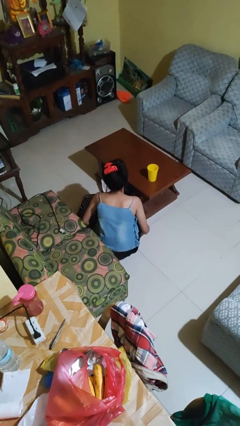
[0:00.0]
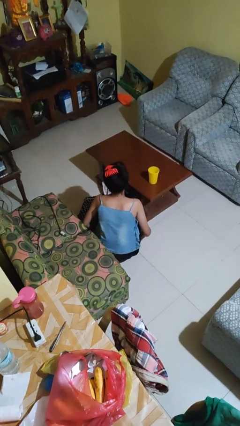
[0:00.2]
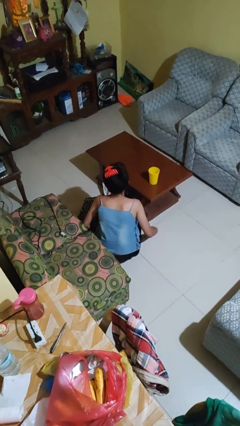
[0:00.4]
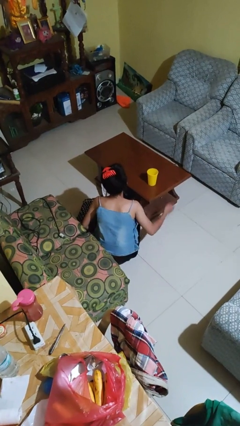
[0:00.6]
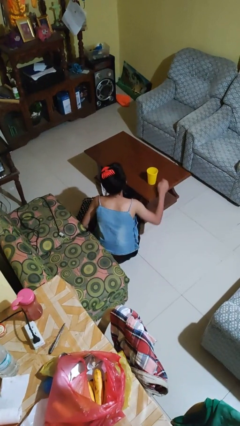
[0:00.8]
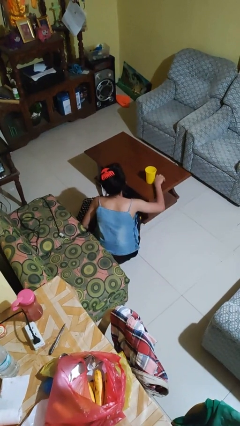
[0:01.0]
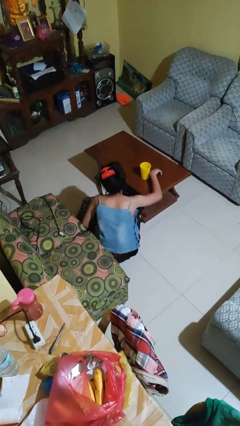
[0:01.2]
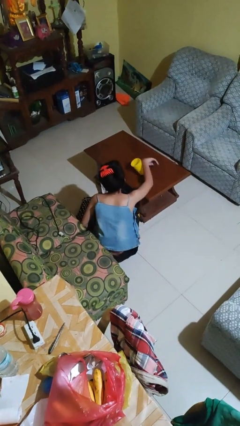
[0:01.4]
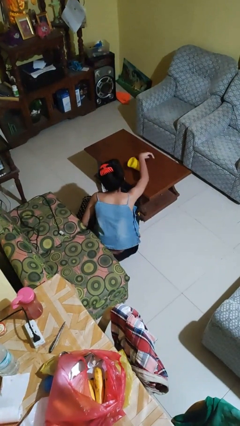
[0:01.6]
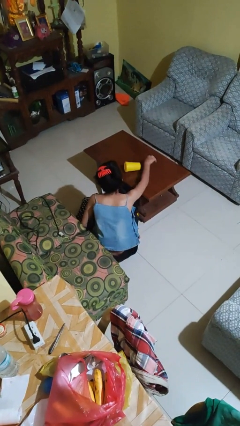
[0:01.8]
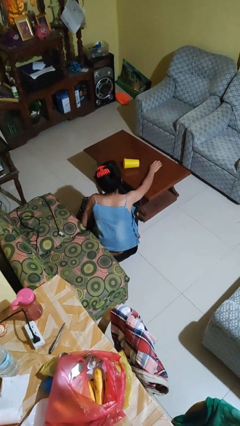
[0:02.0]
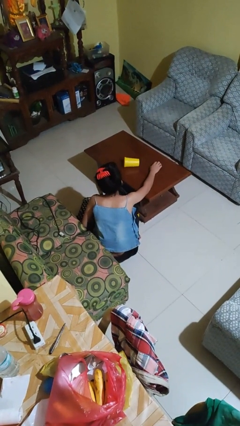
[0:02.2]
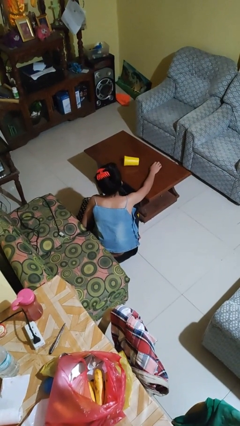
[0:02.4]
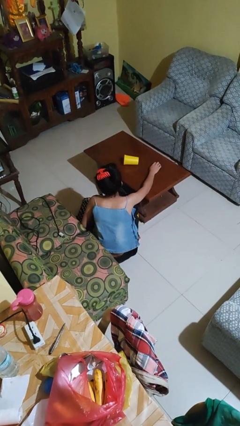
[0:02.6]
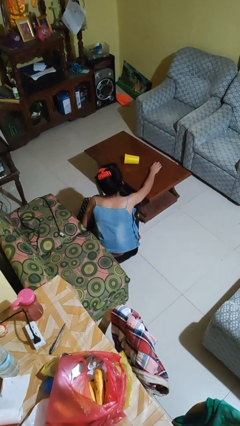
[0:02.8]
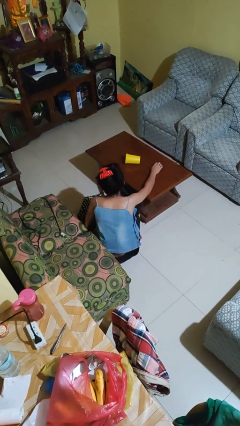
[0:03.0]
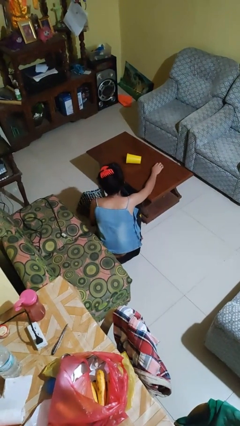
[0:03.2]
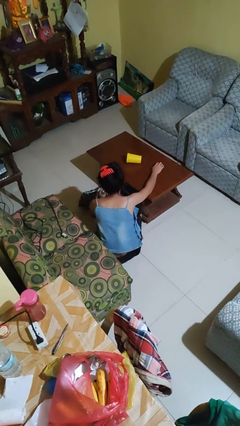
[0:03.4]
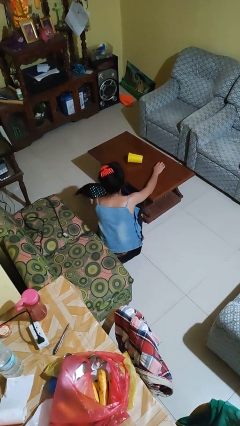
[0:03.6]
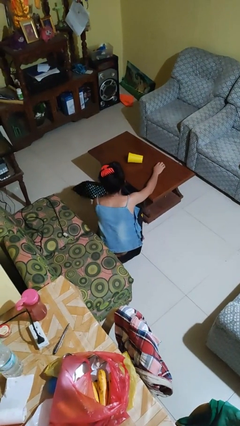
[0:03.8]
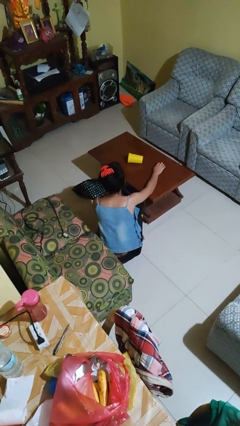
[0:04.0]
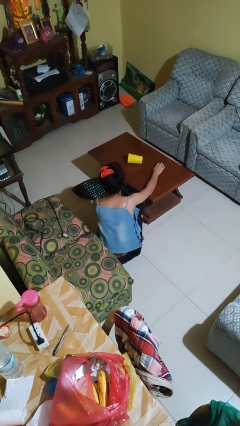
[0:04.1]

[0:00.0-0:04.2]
person spills on table

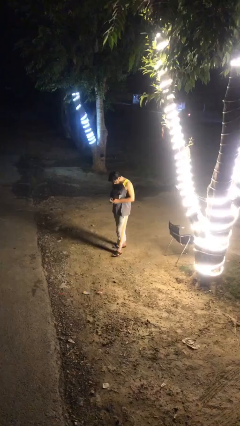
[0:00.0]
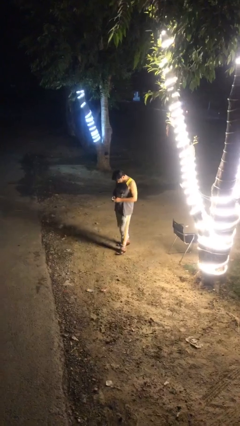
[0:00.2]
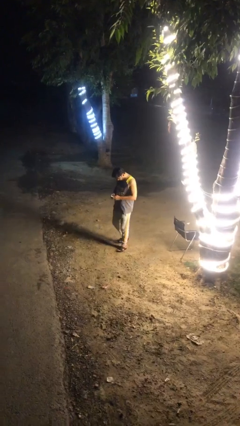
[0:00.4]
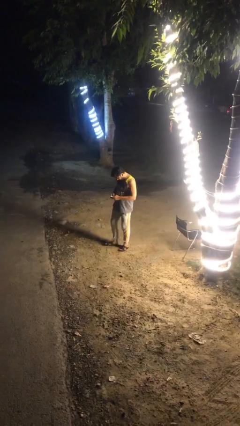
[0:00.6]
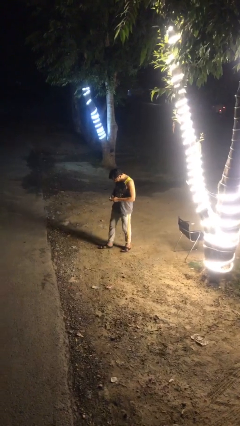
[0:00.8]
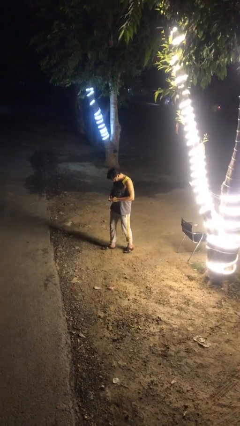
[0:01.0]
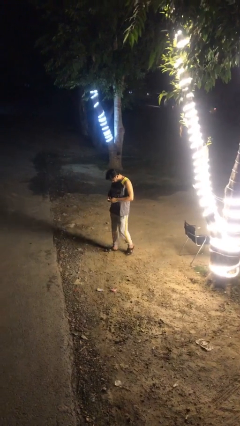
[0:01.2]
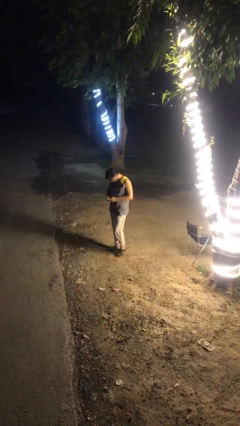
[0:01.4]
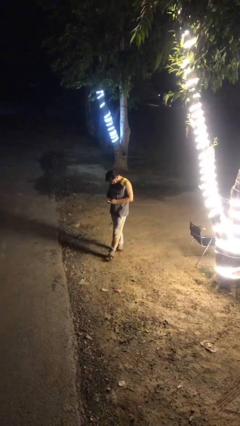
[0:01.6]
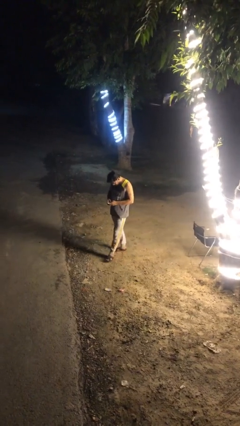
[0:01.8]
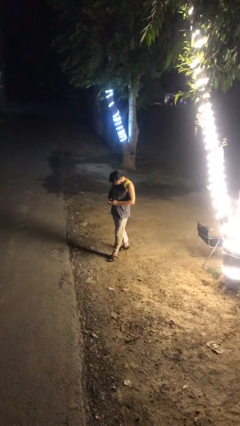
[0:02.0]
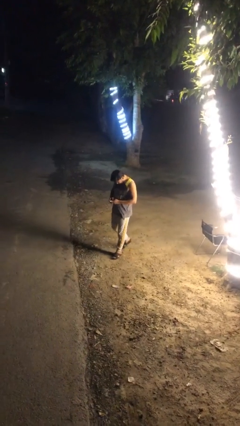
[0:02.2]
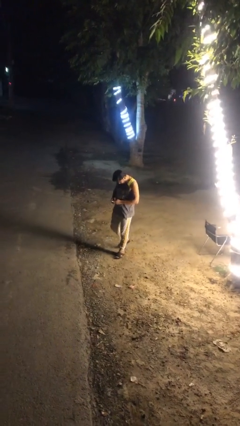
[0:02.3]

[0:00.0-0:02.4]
person texts on phone

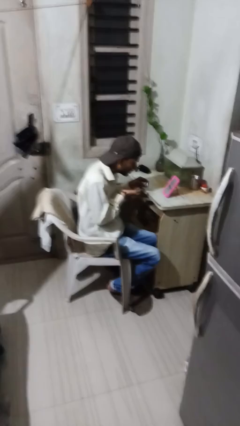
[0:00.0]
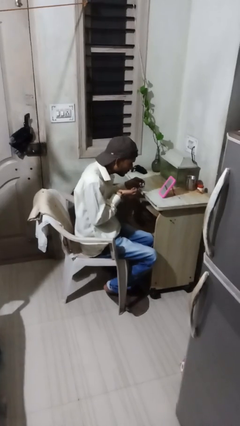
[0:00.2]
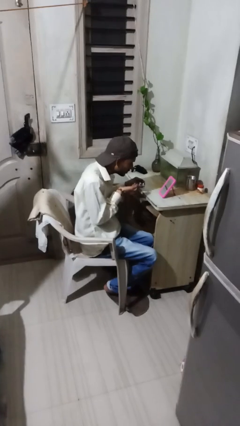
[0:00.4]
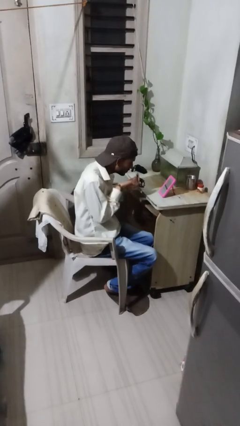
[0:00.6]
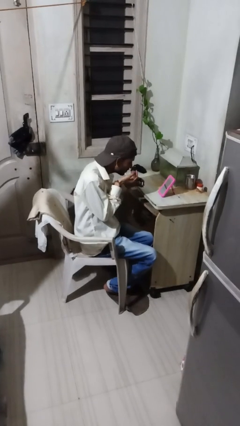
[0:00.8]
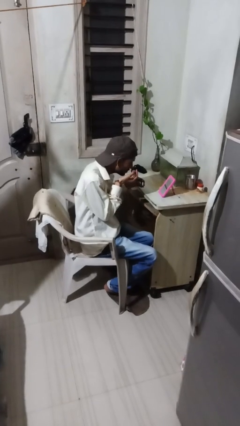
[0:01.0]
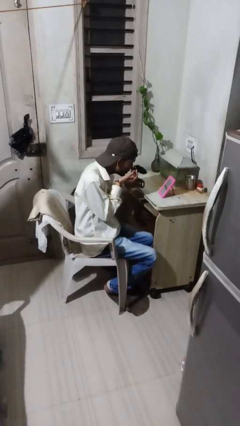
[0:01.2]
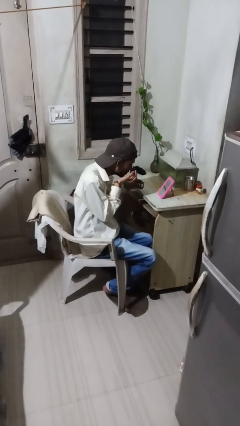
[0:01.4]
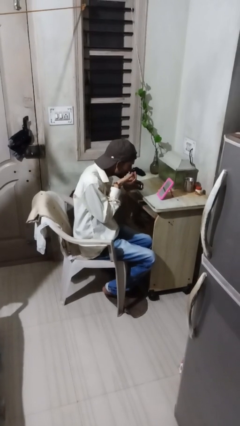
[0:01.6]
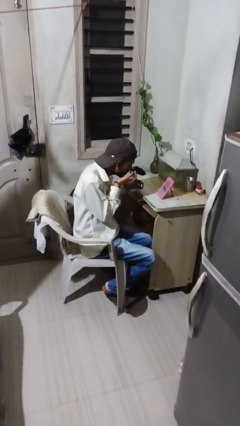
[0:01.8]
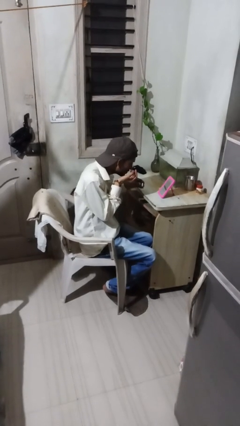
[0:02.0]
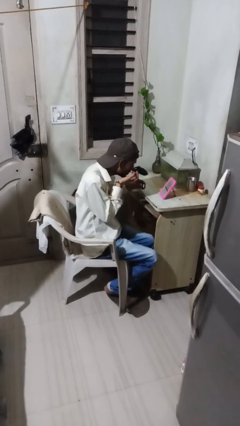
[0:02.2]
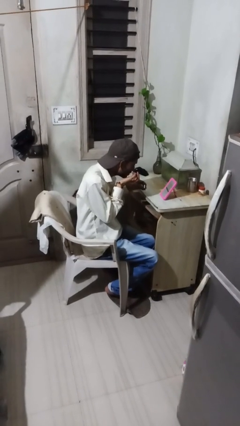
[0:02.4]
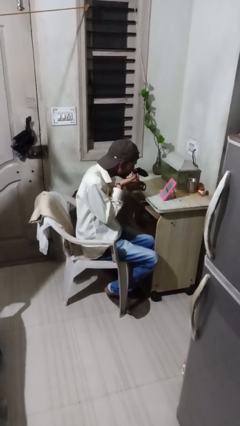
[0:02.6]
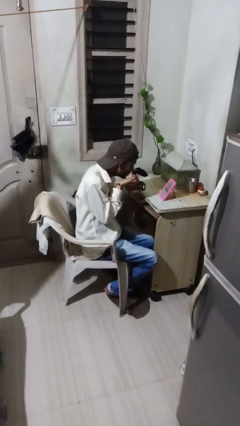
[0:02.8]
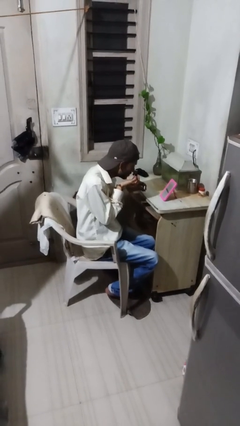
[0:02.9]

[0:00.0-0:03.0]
person applies eye makeup

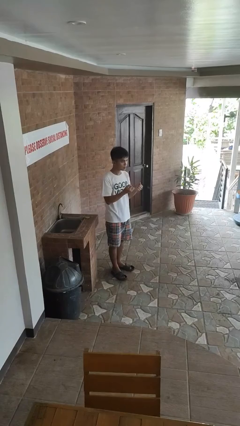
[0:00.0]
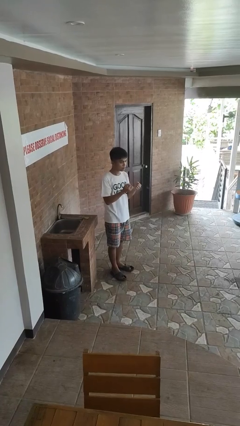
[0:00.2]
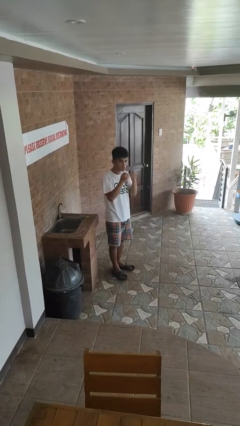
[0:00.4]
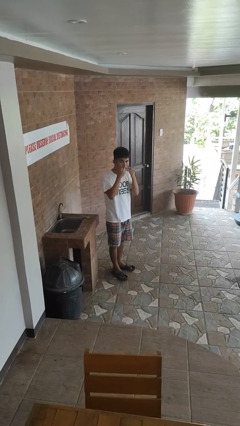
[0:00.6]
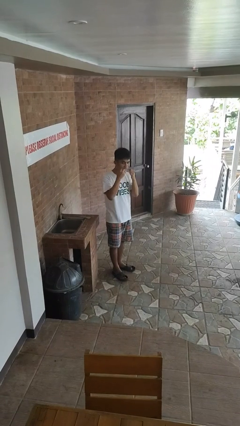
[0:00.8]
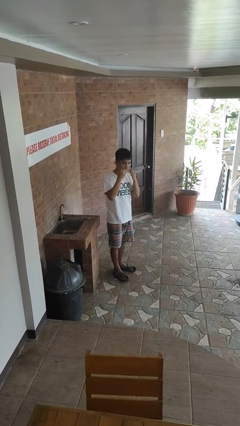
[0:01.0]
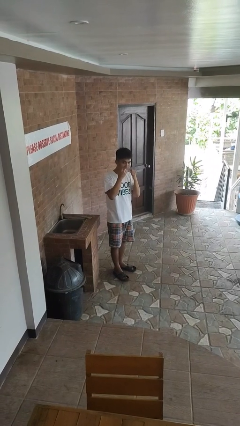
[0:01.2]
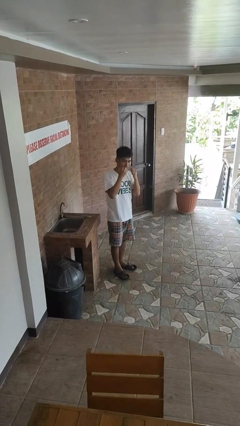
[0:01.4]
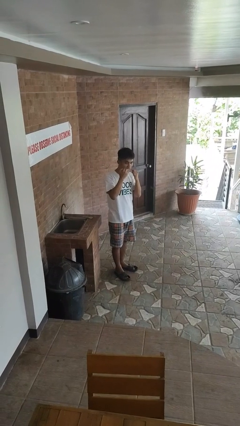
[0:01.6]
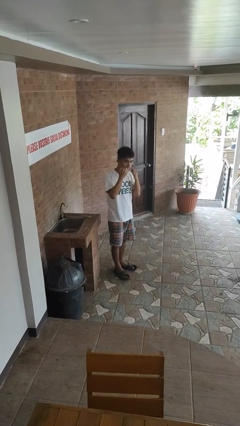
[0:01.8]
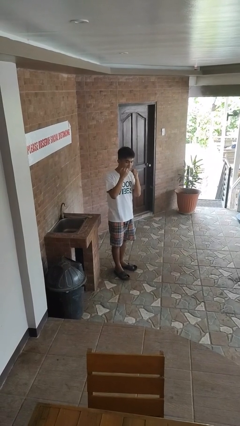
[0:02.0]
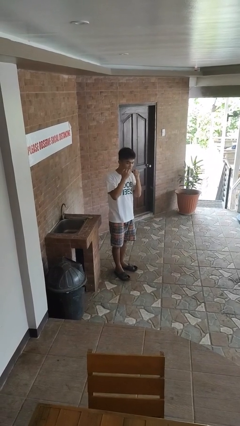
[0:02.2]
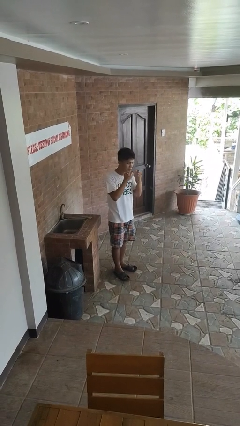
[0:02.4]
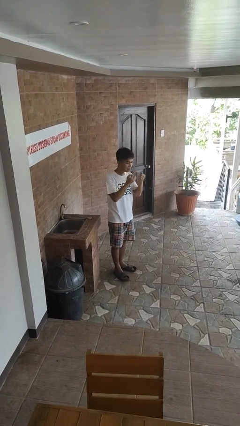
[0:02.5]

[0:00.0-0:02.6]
person flosses

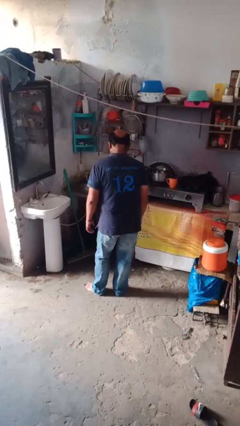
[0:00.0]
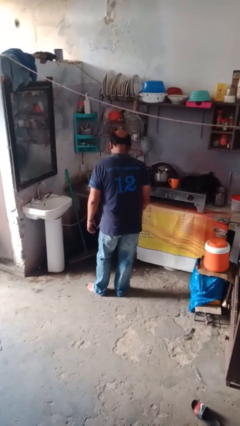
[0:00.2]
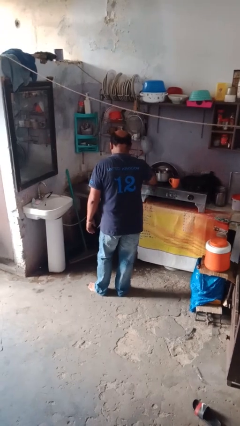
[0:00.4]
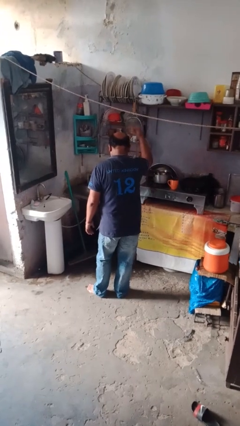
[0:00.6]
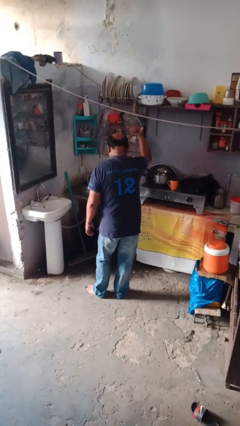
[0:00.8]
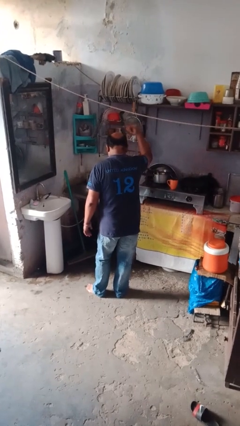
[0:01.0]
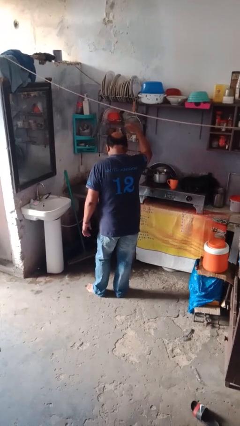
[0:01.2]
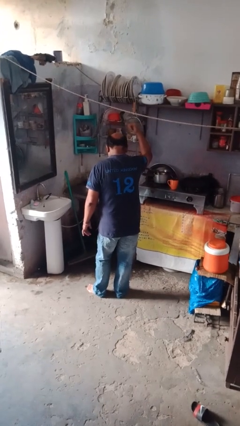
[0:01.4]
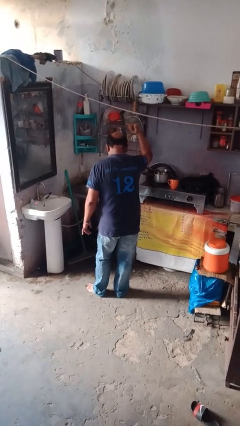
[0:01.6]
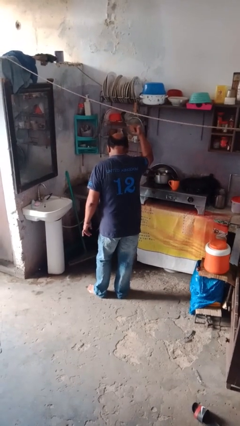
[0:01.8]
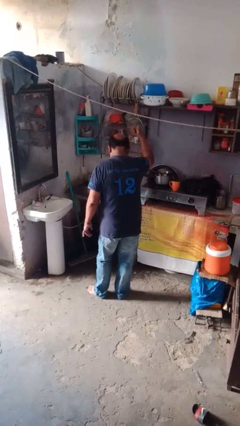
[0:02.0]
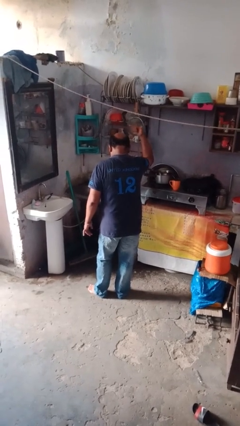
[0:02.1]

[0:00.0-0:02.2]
person gestures hang loose

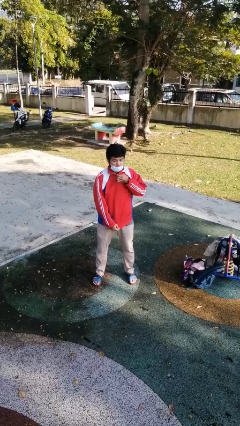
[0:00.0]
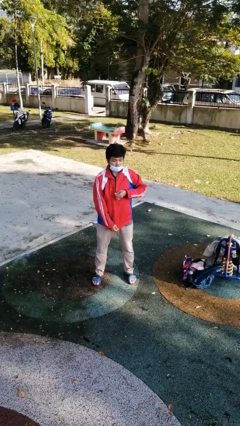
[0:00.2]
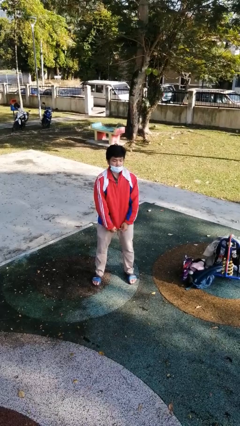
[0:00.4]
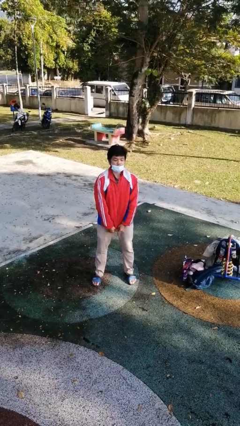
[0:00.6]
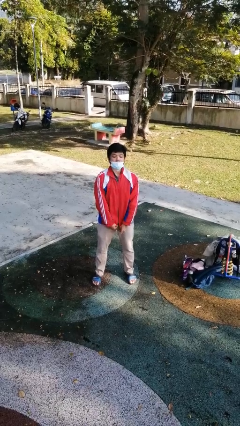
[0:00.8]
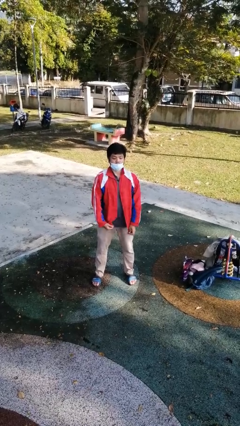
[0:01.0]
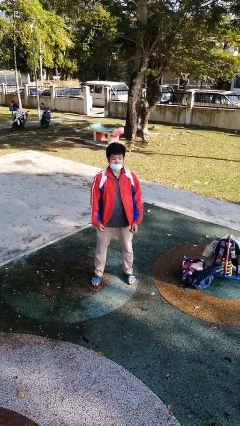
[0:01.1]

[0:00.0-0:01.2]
person unzips jacket

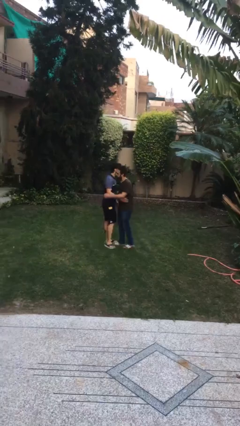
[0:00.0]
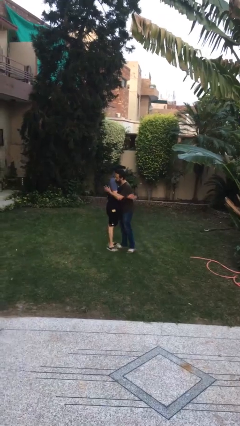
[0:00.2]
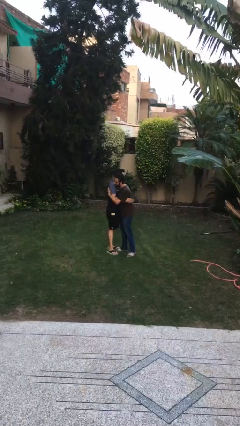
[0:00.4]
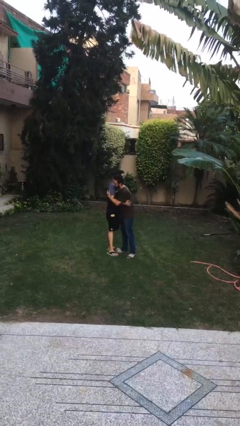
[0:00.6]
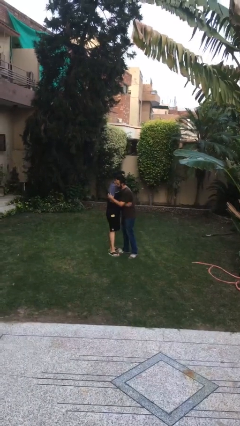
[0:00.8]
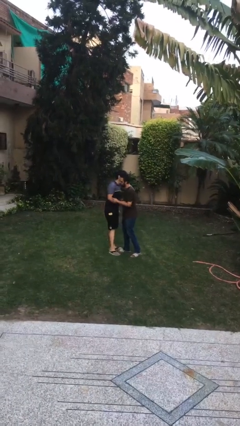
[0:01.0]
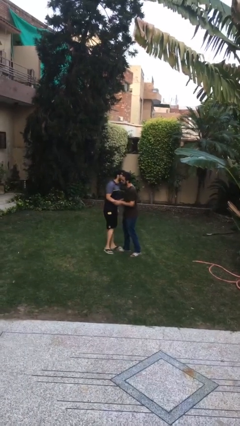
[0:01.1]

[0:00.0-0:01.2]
person embraces person

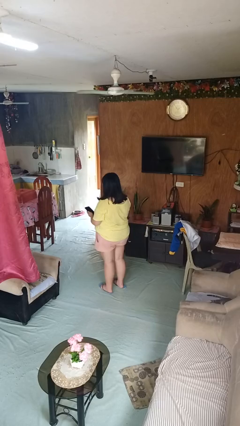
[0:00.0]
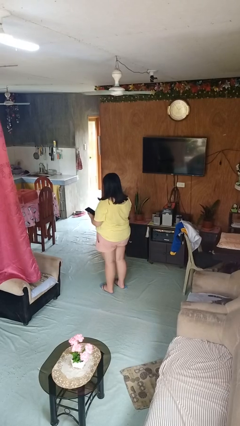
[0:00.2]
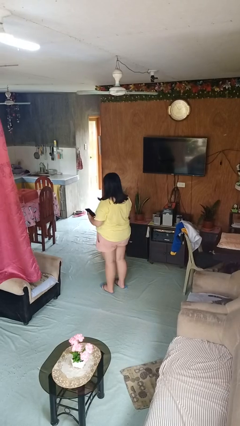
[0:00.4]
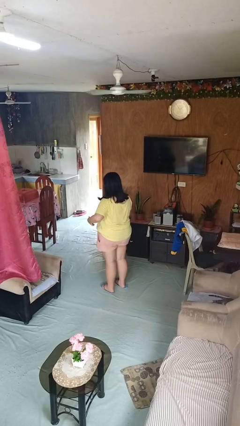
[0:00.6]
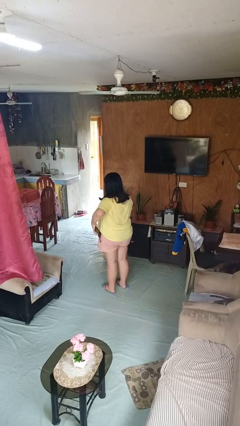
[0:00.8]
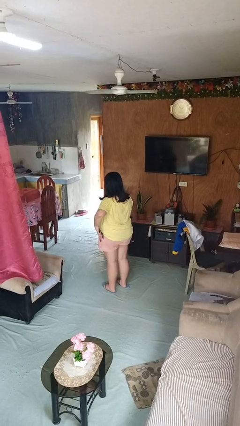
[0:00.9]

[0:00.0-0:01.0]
person puts phone into pocket
